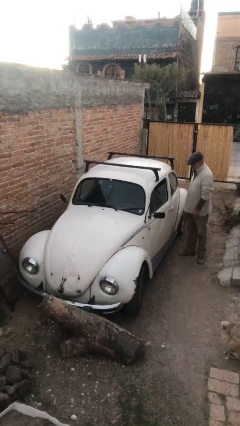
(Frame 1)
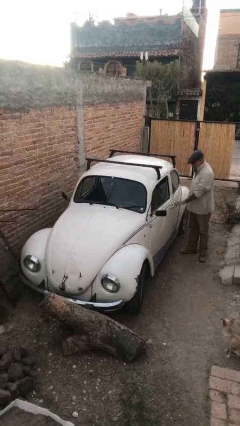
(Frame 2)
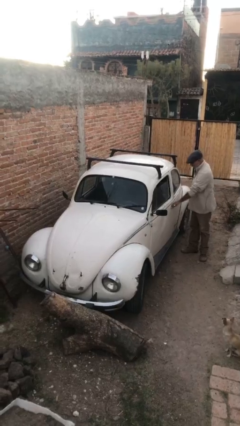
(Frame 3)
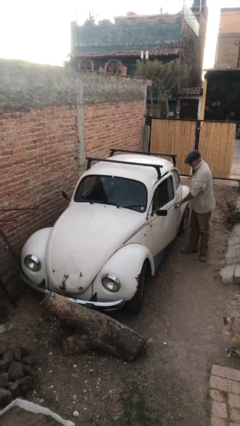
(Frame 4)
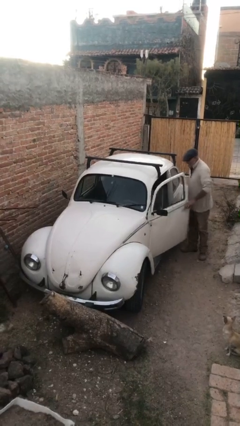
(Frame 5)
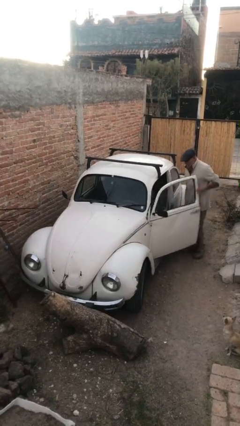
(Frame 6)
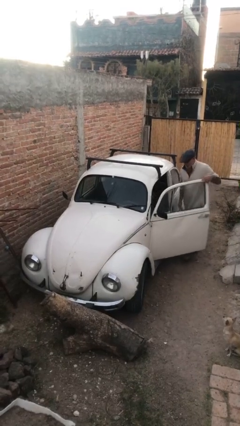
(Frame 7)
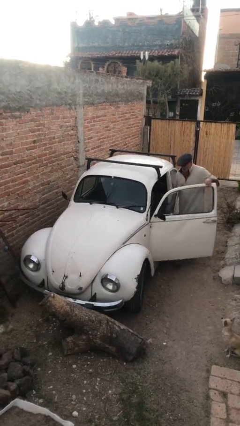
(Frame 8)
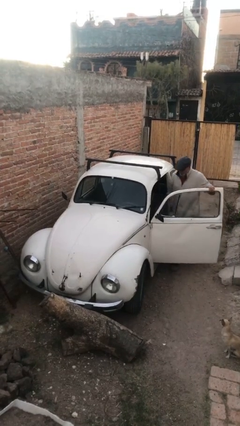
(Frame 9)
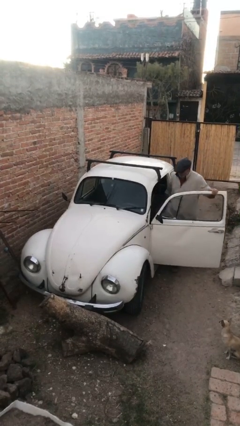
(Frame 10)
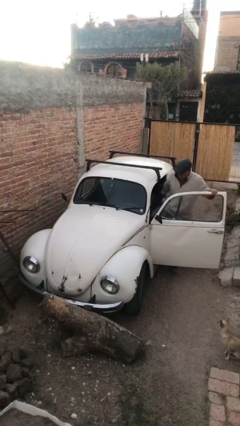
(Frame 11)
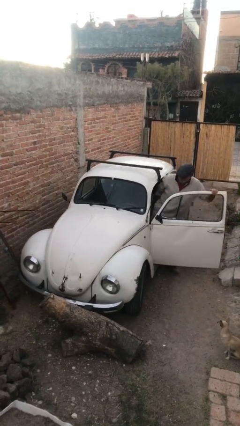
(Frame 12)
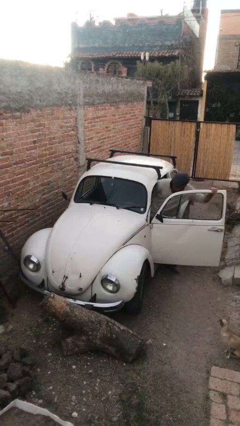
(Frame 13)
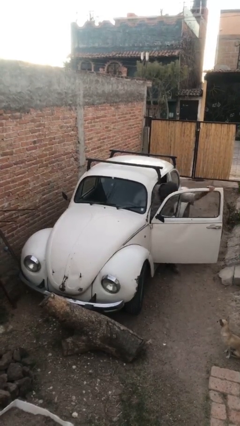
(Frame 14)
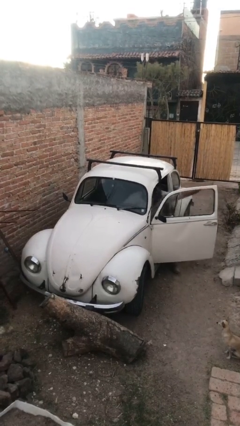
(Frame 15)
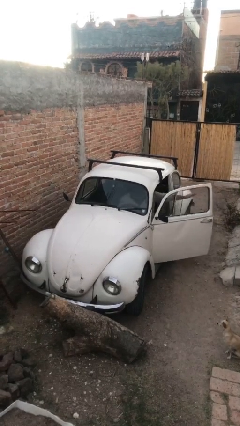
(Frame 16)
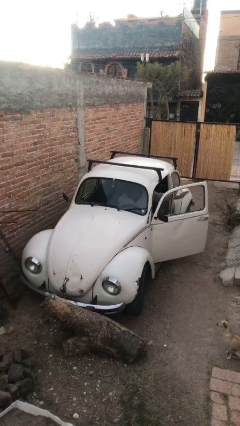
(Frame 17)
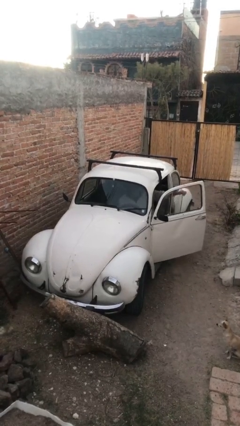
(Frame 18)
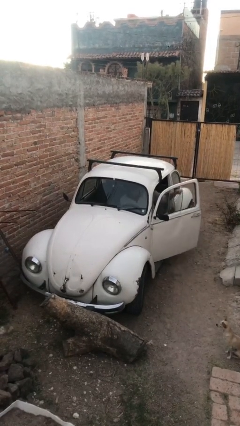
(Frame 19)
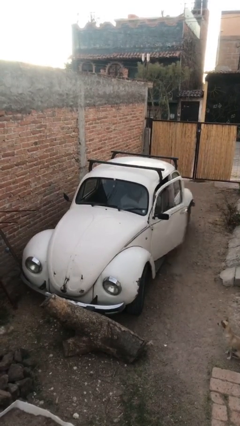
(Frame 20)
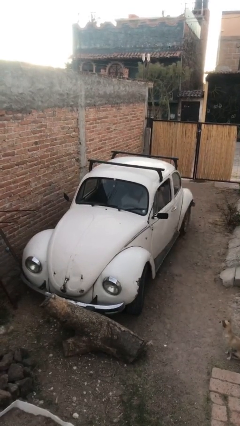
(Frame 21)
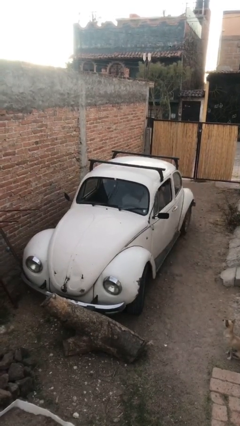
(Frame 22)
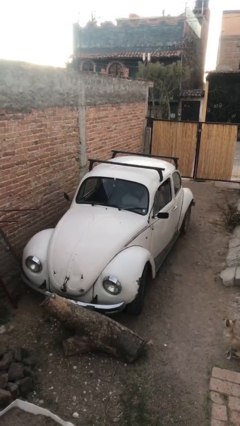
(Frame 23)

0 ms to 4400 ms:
car picks up person

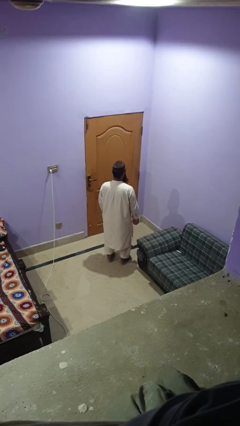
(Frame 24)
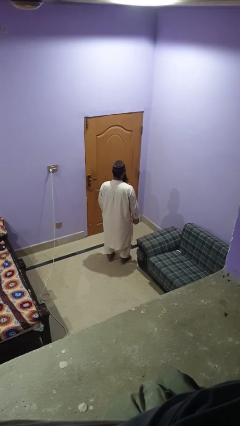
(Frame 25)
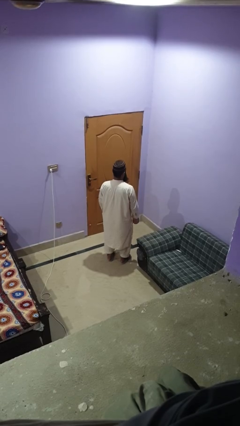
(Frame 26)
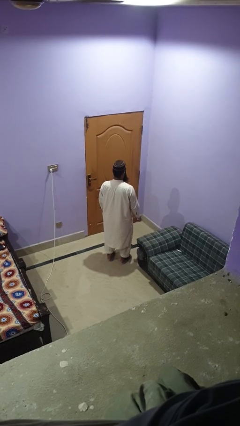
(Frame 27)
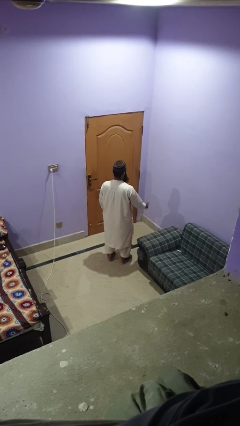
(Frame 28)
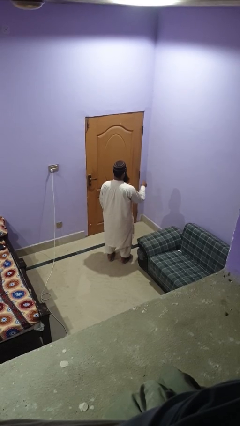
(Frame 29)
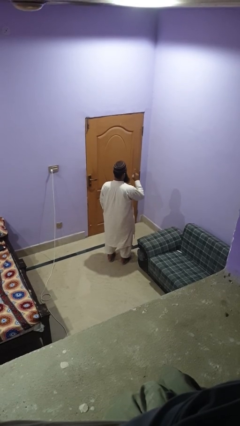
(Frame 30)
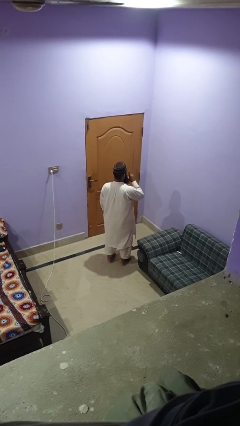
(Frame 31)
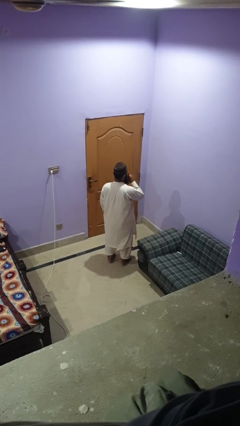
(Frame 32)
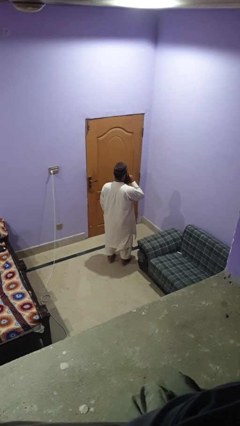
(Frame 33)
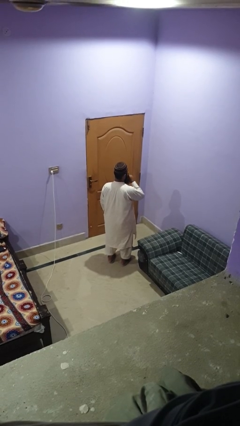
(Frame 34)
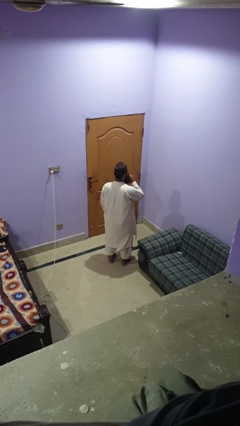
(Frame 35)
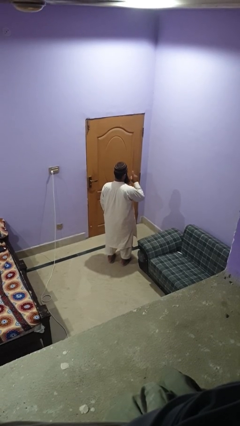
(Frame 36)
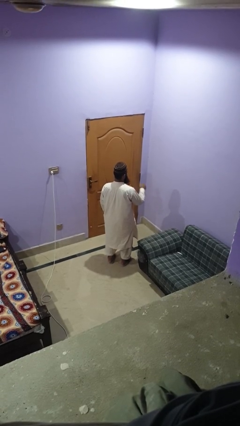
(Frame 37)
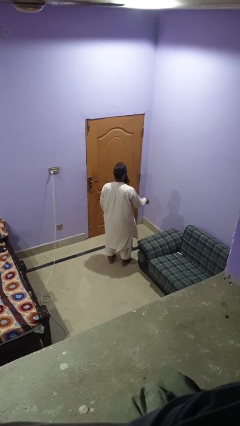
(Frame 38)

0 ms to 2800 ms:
person gestures be quiet

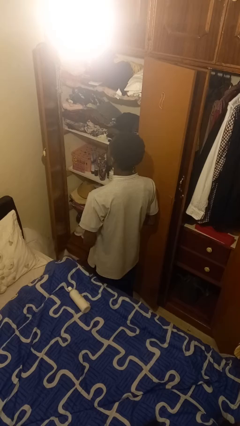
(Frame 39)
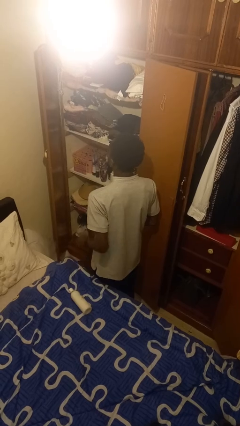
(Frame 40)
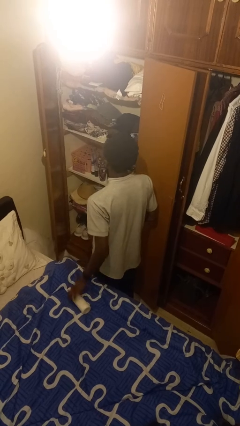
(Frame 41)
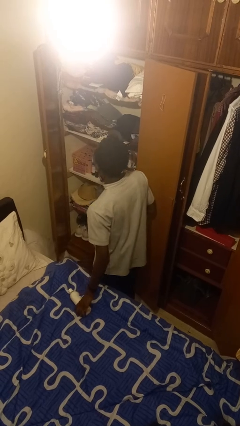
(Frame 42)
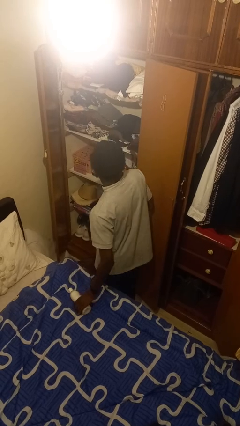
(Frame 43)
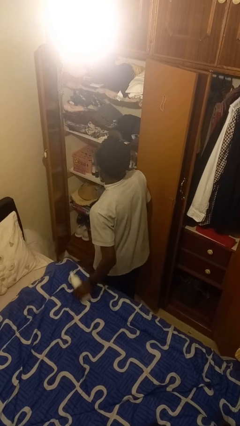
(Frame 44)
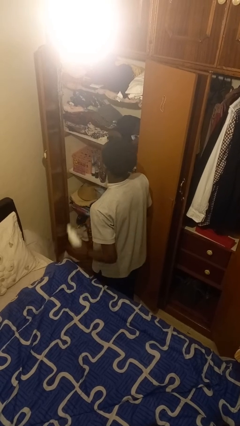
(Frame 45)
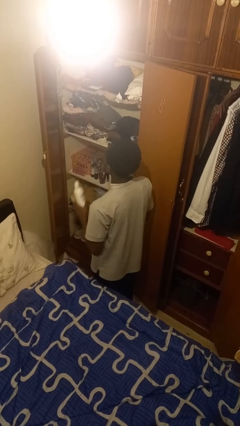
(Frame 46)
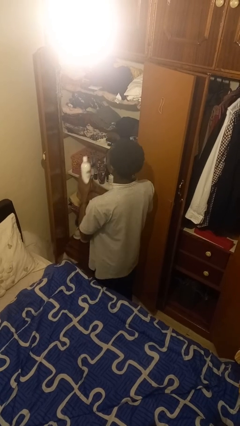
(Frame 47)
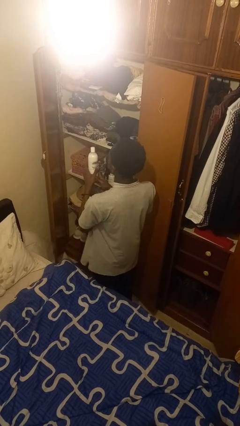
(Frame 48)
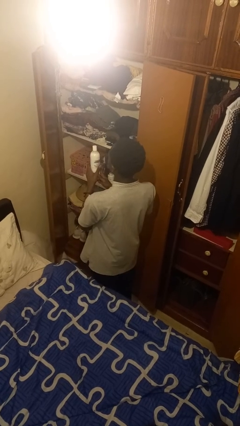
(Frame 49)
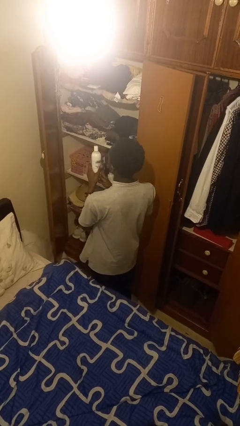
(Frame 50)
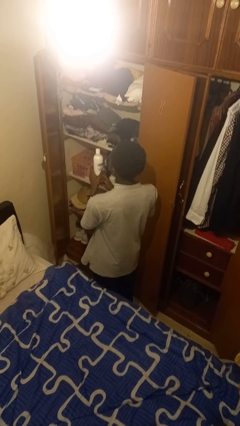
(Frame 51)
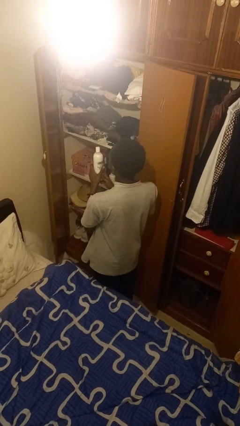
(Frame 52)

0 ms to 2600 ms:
person picks up object from bed

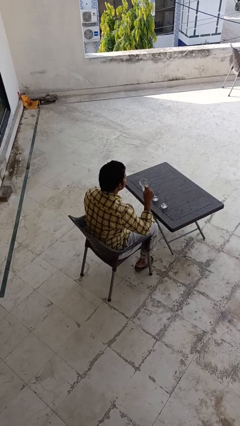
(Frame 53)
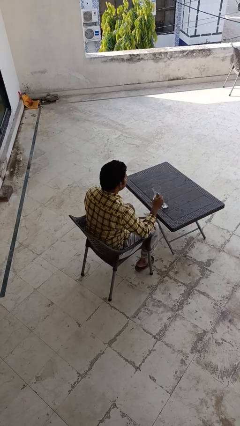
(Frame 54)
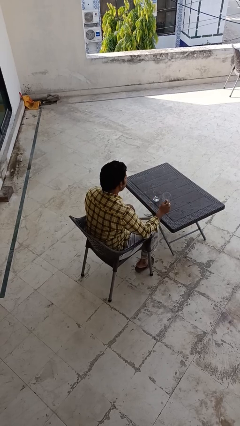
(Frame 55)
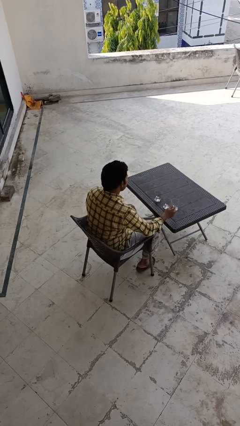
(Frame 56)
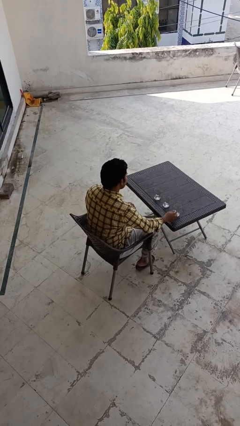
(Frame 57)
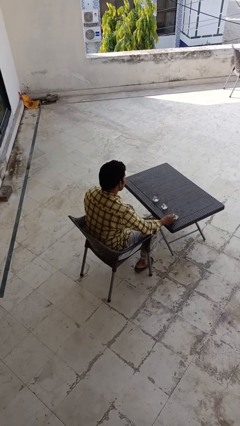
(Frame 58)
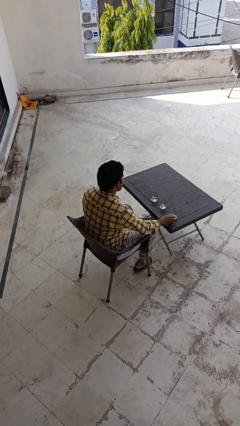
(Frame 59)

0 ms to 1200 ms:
person puts down object on table

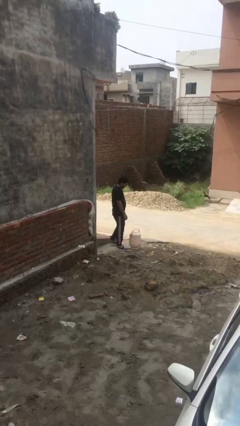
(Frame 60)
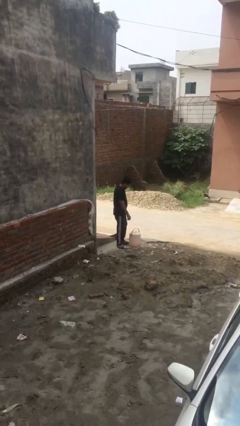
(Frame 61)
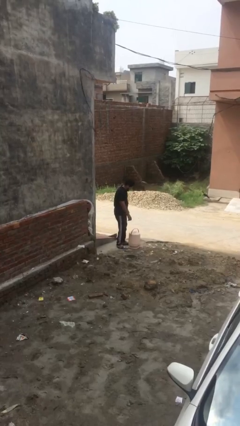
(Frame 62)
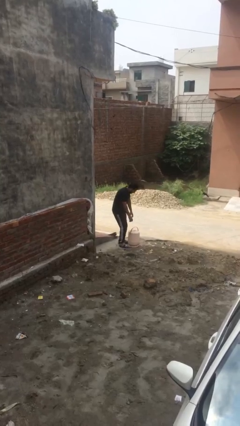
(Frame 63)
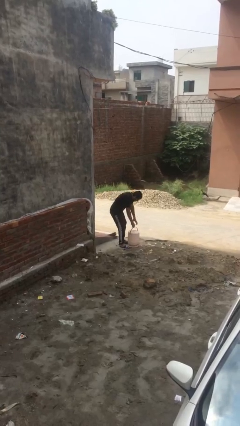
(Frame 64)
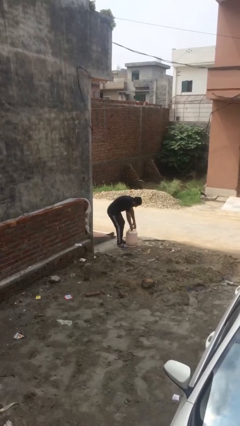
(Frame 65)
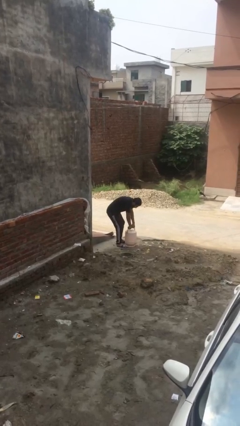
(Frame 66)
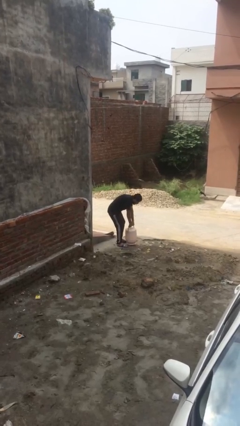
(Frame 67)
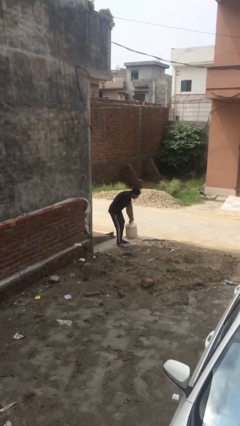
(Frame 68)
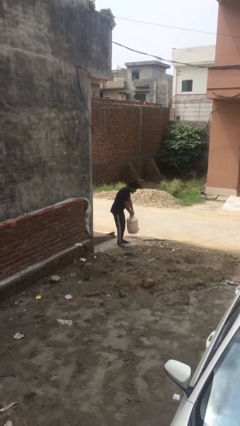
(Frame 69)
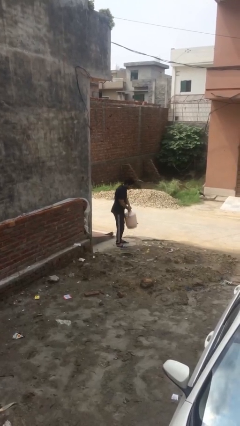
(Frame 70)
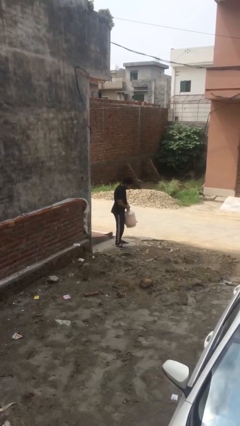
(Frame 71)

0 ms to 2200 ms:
person picks up object from floor

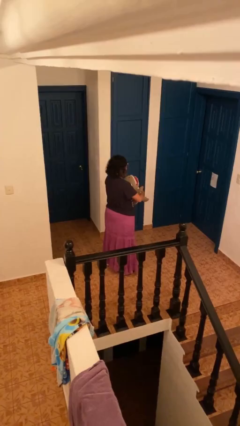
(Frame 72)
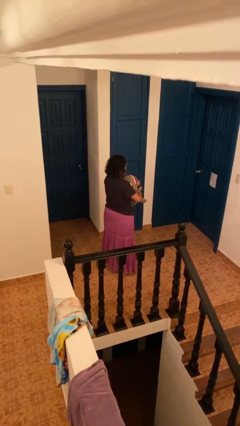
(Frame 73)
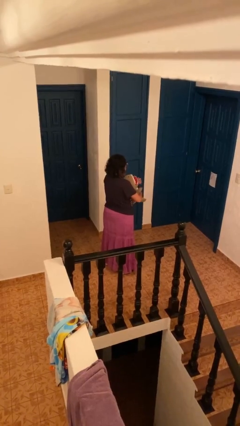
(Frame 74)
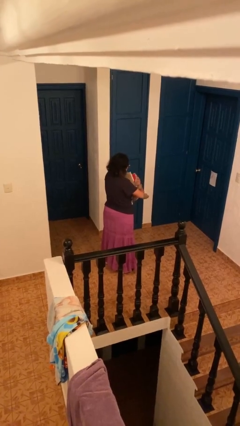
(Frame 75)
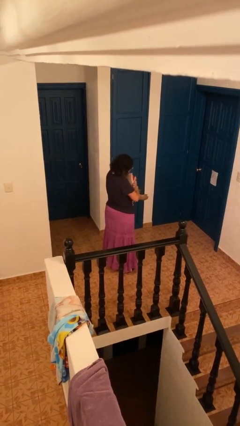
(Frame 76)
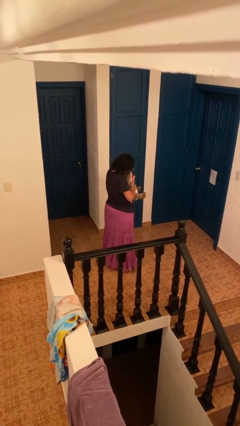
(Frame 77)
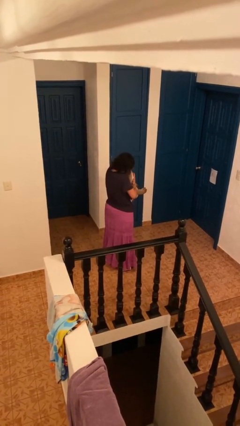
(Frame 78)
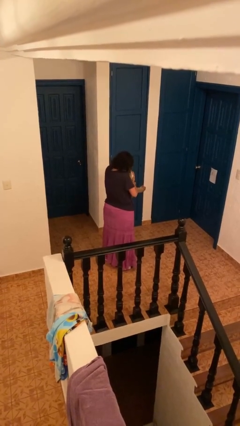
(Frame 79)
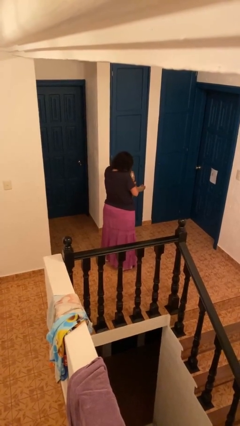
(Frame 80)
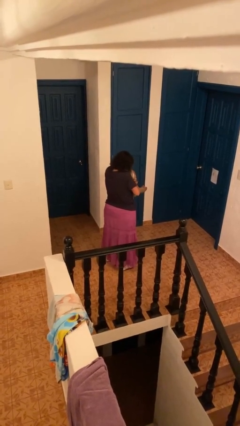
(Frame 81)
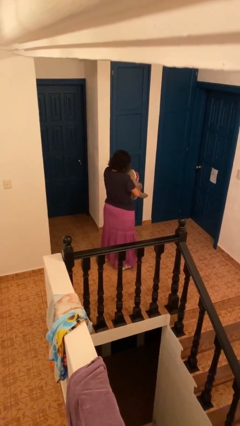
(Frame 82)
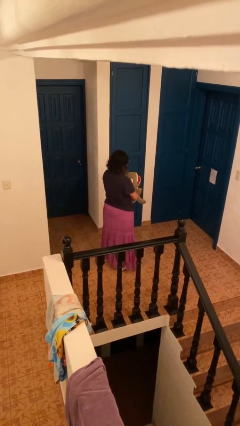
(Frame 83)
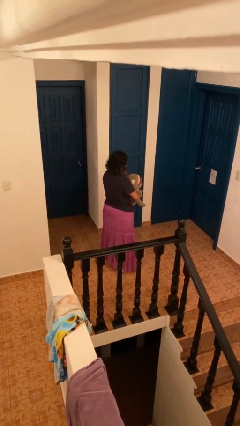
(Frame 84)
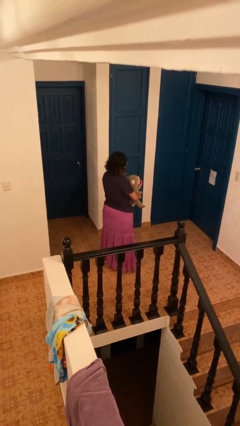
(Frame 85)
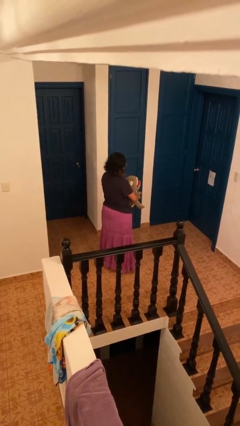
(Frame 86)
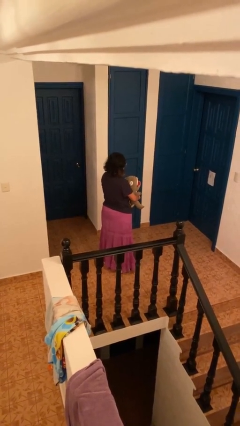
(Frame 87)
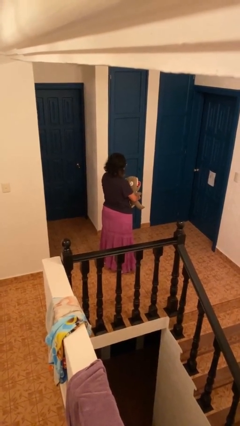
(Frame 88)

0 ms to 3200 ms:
person hugs stuffed animal

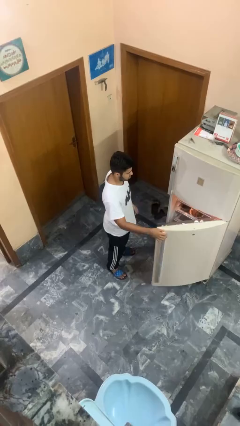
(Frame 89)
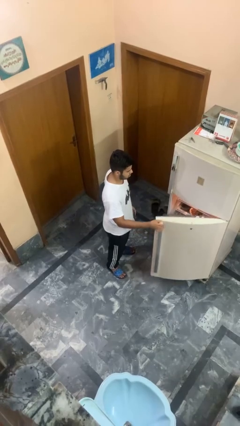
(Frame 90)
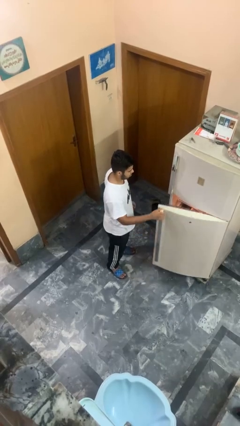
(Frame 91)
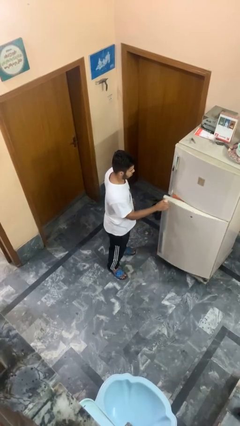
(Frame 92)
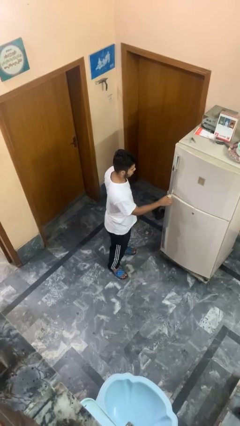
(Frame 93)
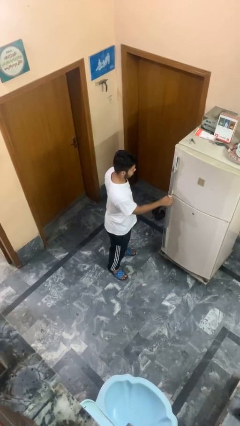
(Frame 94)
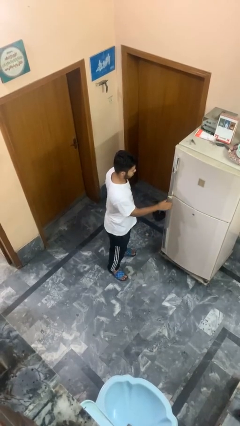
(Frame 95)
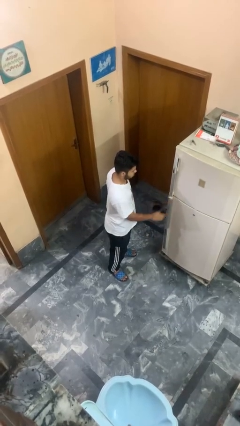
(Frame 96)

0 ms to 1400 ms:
person closes refrigerator
